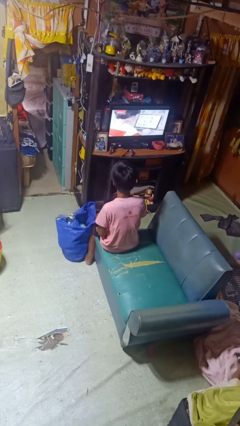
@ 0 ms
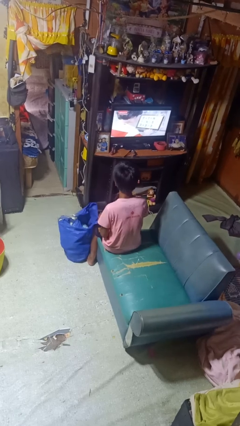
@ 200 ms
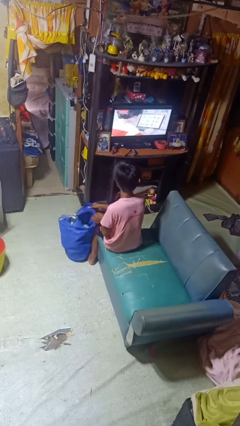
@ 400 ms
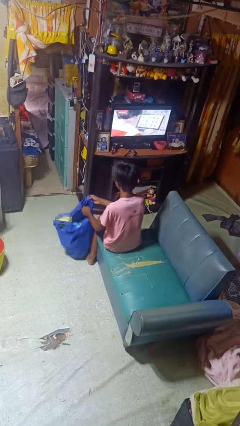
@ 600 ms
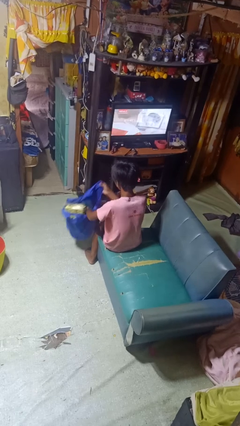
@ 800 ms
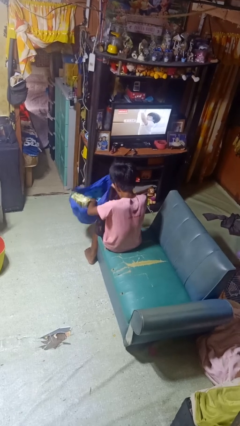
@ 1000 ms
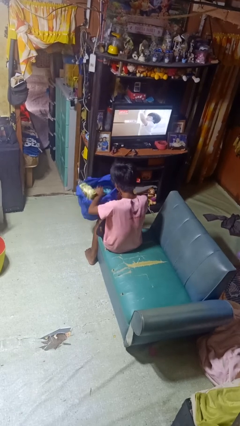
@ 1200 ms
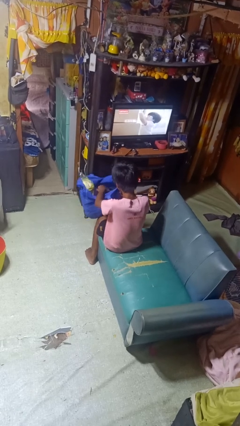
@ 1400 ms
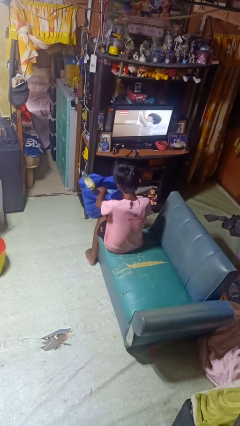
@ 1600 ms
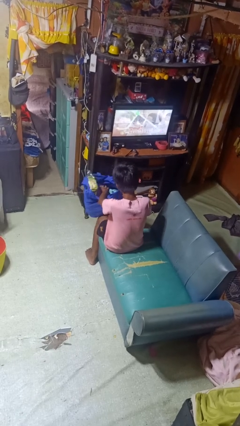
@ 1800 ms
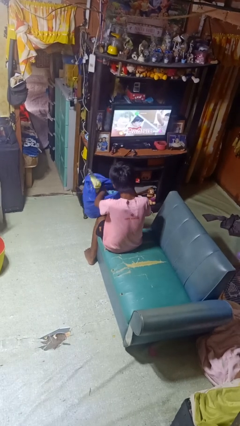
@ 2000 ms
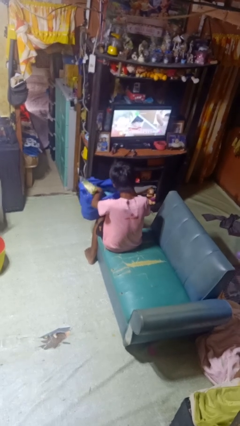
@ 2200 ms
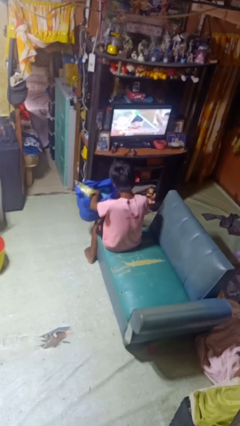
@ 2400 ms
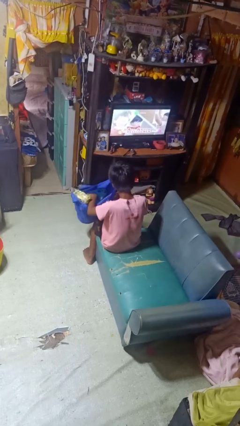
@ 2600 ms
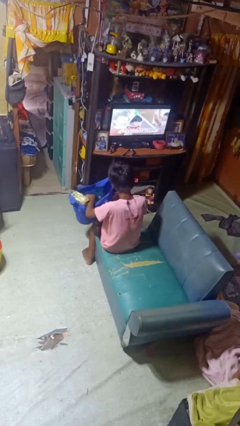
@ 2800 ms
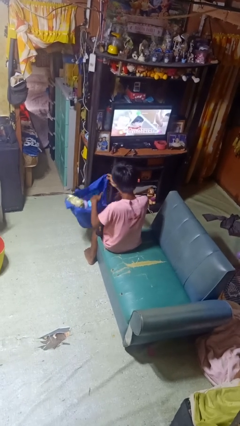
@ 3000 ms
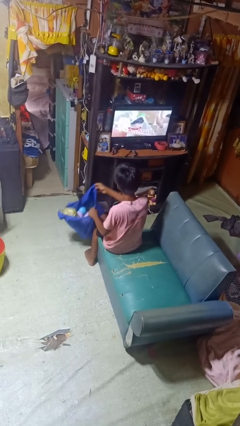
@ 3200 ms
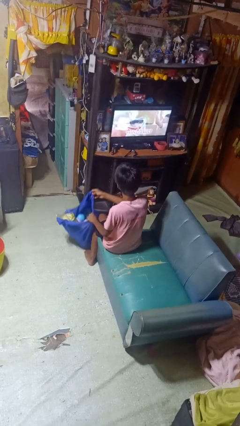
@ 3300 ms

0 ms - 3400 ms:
person searches in bag

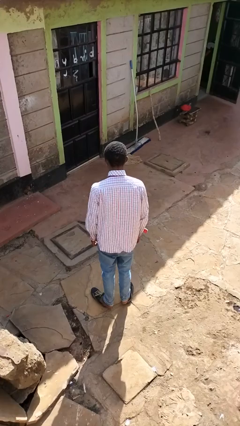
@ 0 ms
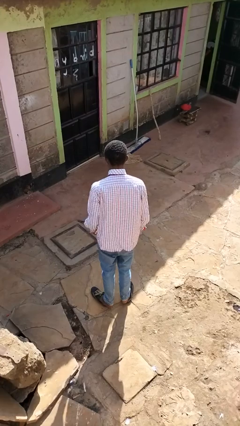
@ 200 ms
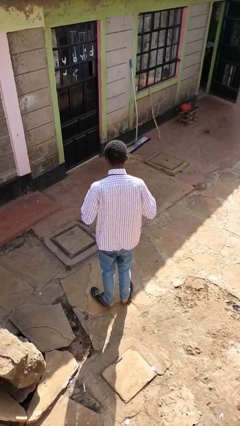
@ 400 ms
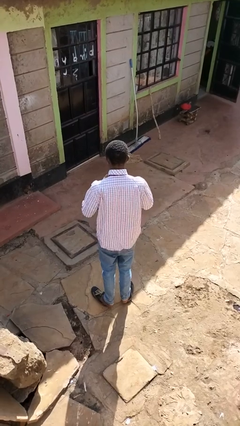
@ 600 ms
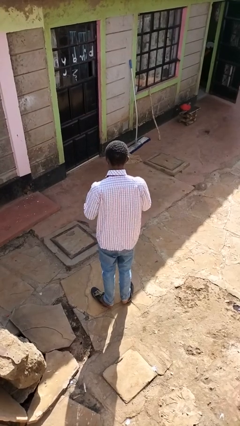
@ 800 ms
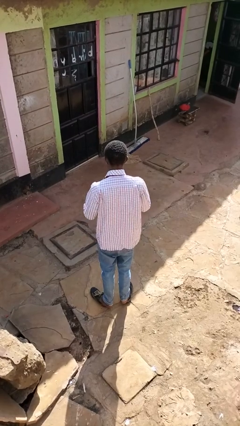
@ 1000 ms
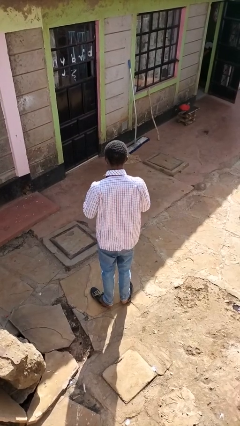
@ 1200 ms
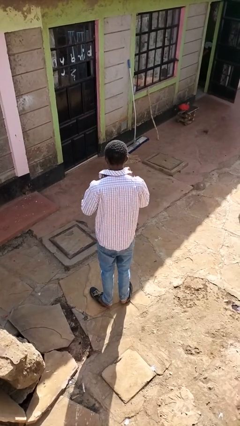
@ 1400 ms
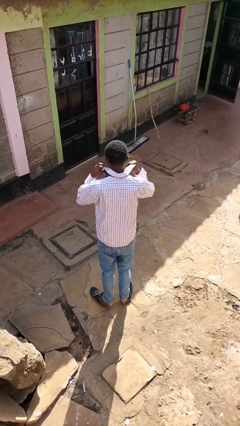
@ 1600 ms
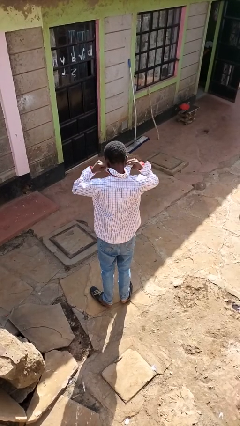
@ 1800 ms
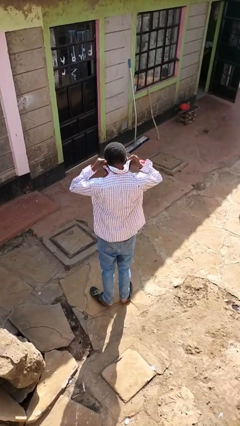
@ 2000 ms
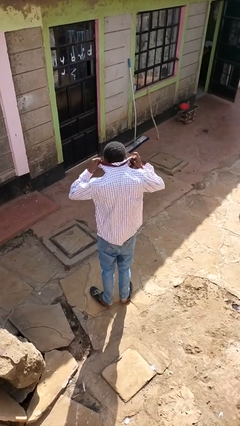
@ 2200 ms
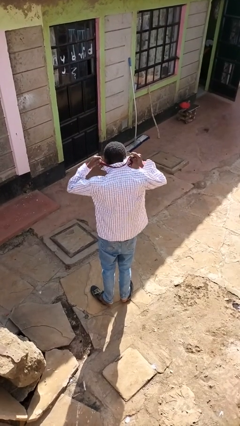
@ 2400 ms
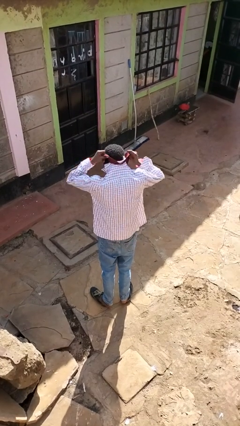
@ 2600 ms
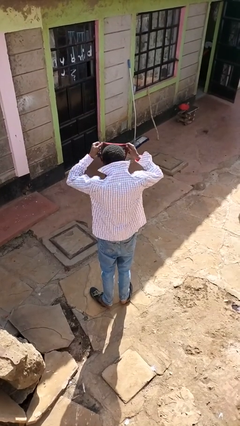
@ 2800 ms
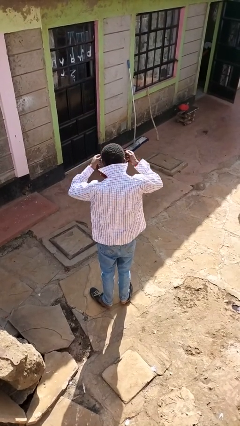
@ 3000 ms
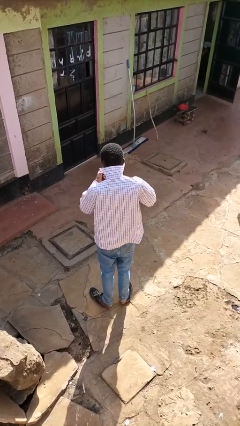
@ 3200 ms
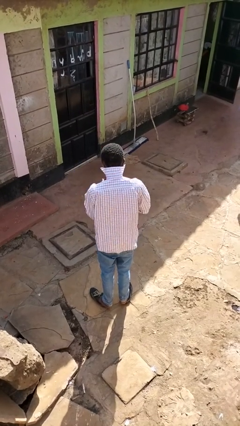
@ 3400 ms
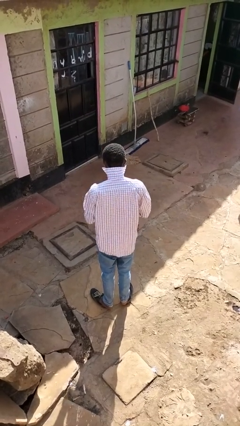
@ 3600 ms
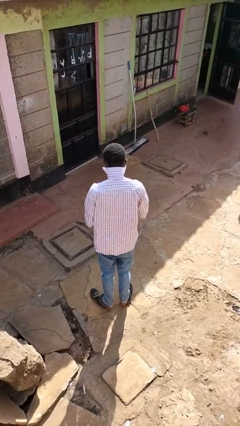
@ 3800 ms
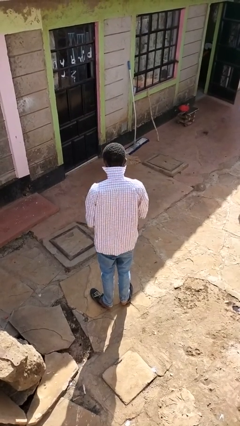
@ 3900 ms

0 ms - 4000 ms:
person takes off necktie

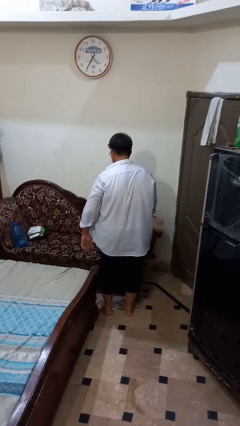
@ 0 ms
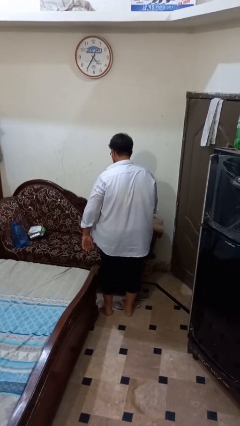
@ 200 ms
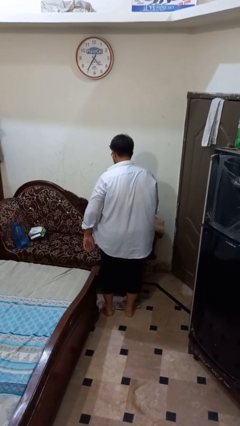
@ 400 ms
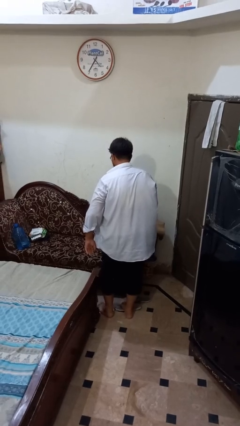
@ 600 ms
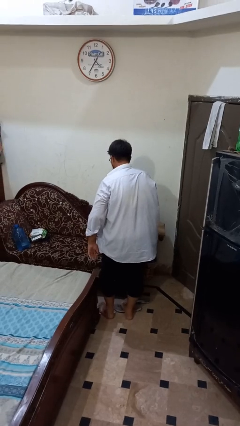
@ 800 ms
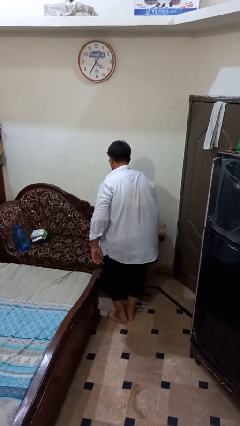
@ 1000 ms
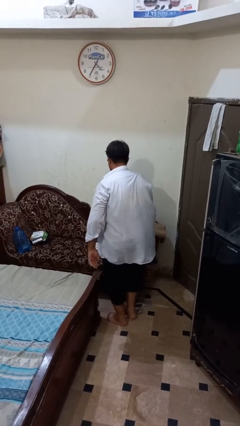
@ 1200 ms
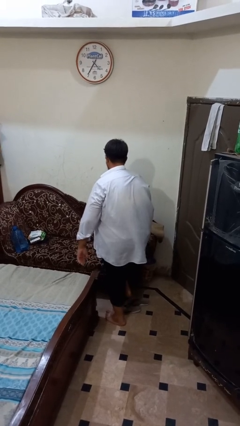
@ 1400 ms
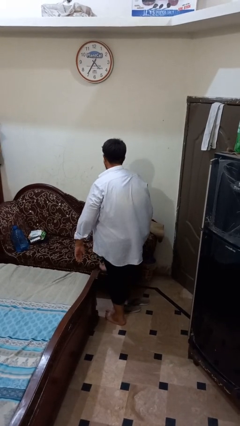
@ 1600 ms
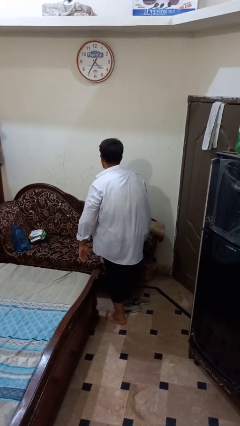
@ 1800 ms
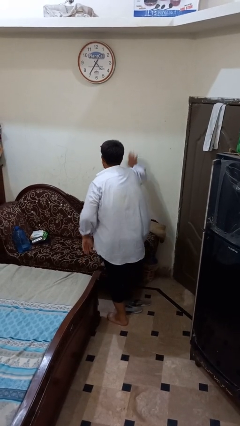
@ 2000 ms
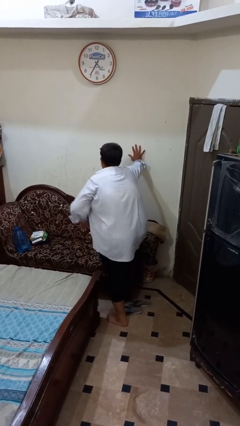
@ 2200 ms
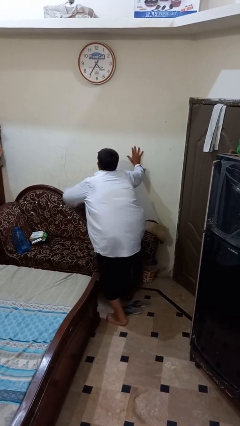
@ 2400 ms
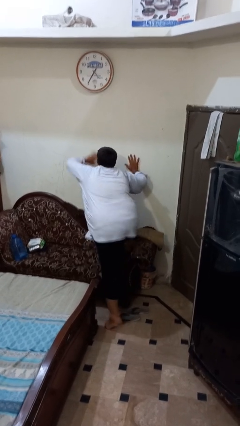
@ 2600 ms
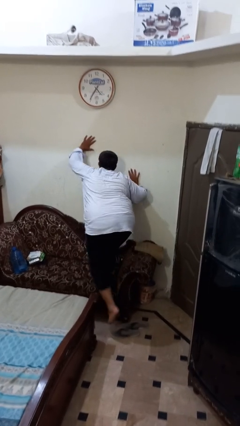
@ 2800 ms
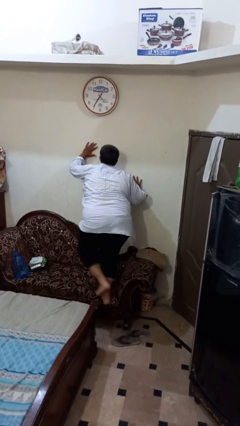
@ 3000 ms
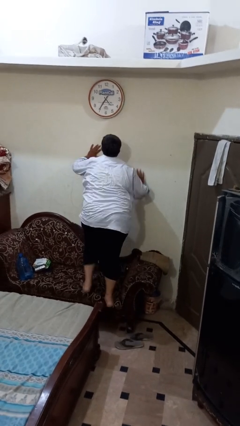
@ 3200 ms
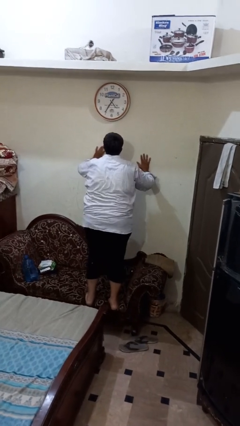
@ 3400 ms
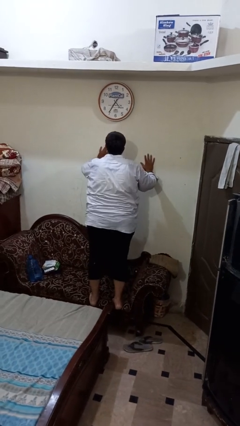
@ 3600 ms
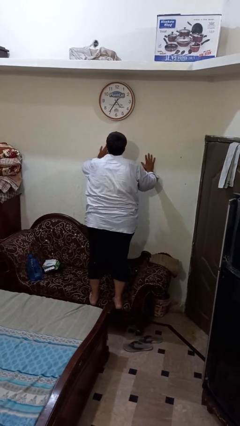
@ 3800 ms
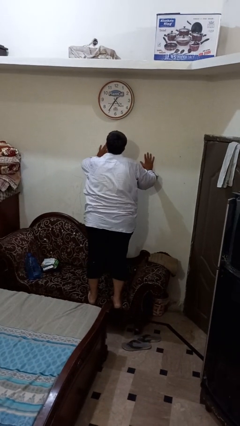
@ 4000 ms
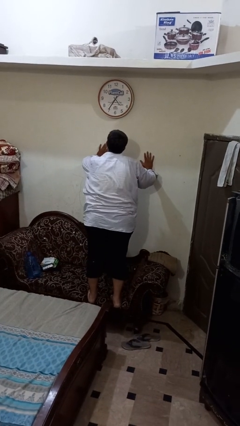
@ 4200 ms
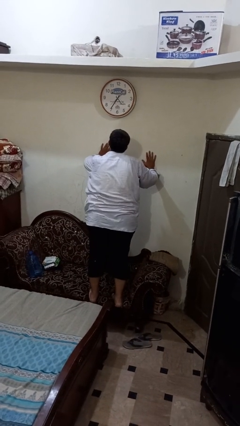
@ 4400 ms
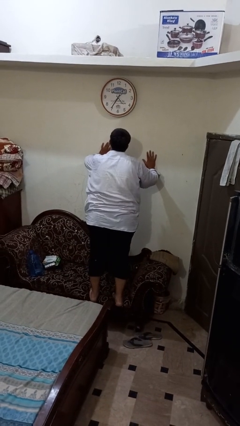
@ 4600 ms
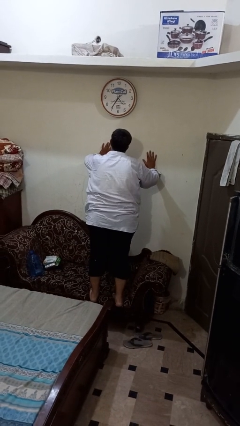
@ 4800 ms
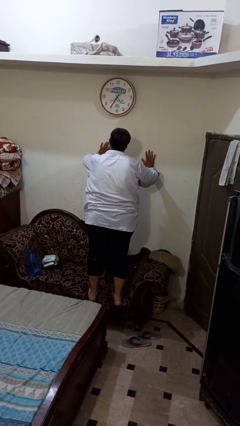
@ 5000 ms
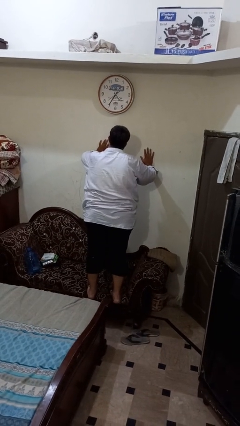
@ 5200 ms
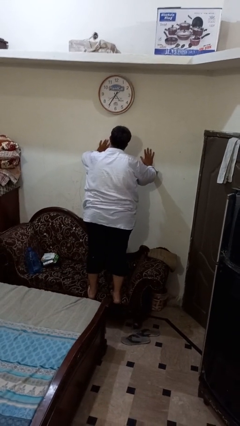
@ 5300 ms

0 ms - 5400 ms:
person climbs on couch

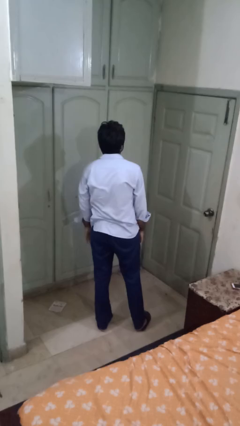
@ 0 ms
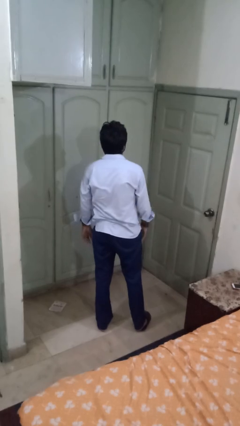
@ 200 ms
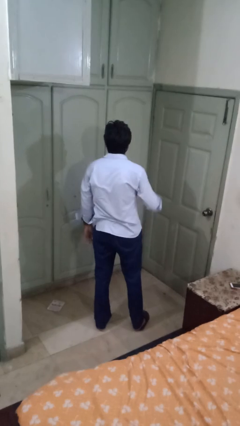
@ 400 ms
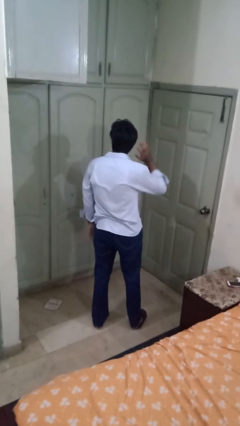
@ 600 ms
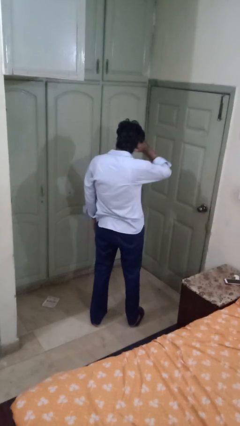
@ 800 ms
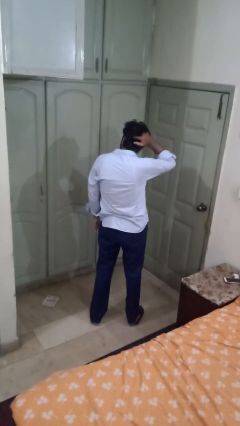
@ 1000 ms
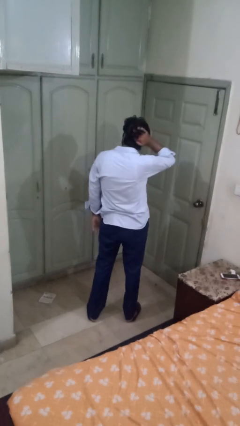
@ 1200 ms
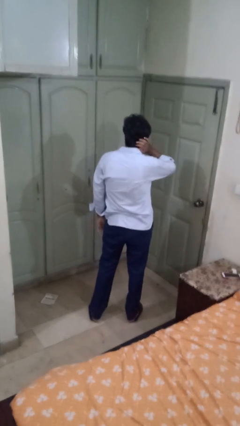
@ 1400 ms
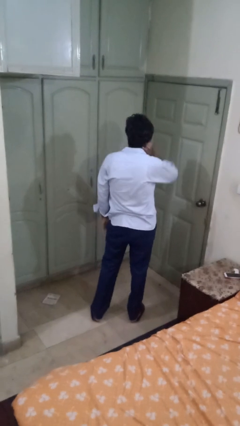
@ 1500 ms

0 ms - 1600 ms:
person strokes hair

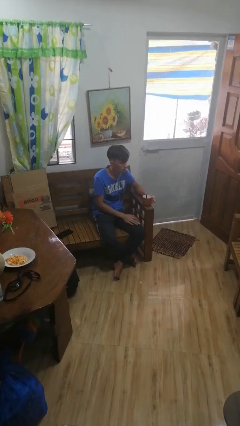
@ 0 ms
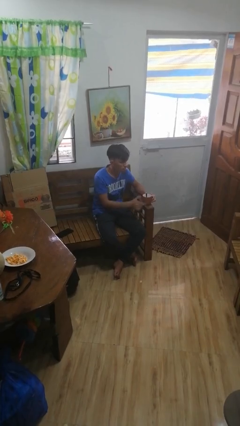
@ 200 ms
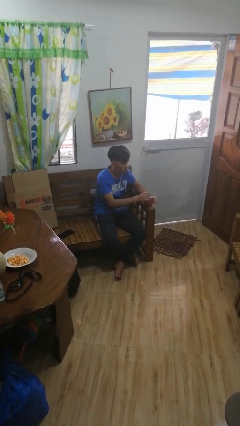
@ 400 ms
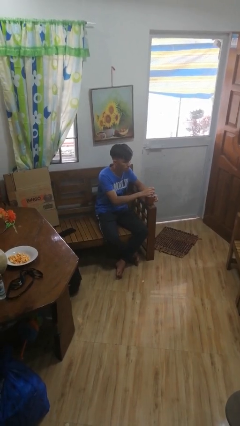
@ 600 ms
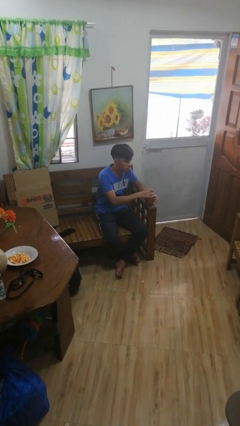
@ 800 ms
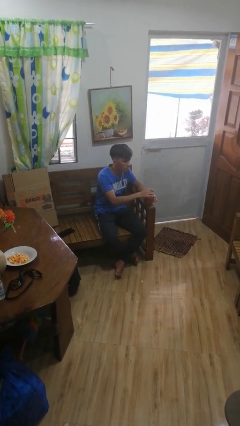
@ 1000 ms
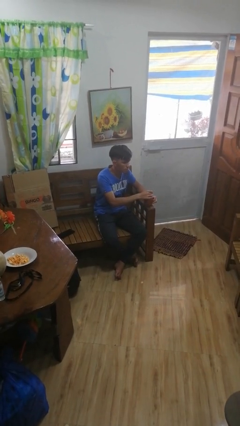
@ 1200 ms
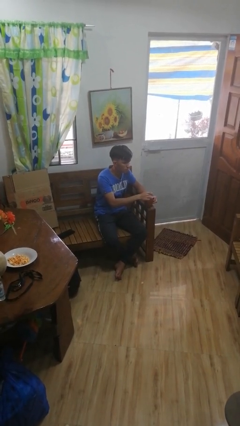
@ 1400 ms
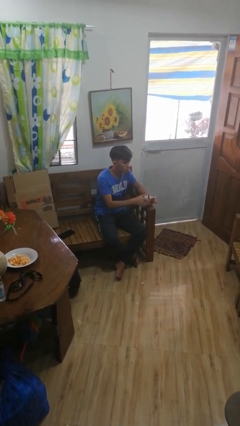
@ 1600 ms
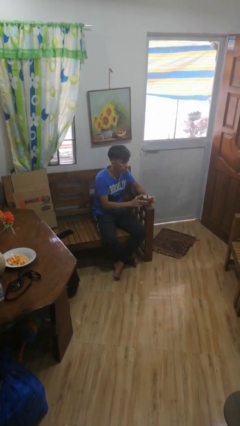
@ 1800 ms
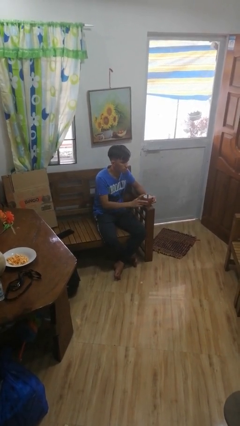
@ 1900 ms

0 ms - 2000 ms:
person stirs mug

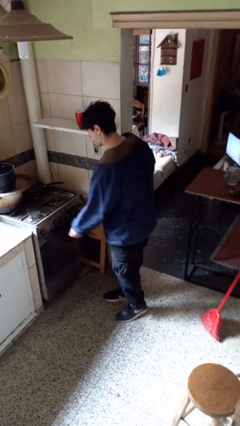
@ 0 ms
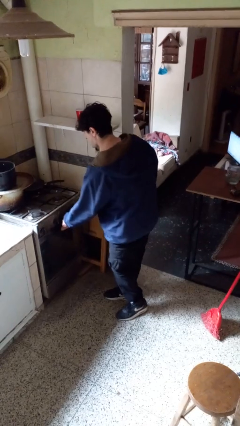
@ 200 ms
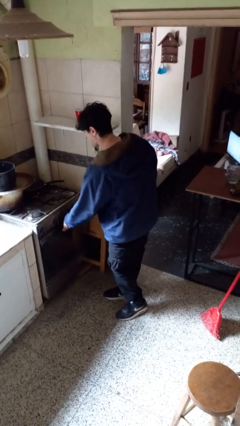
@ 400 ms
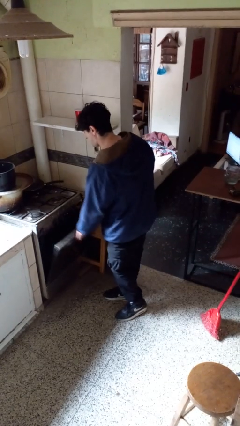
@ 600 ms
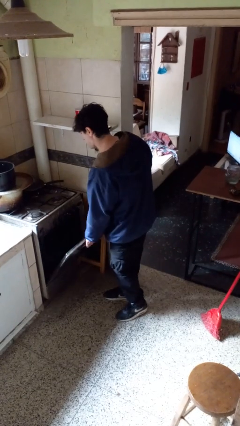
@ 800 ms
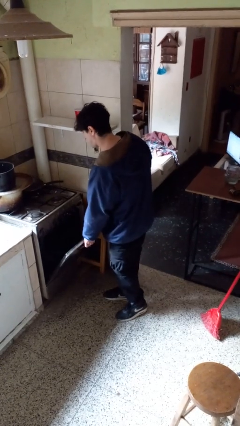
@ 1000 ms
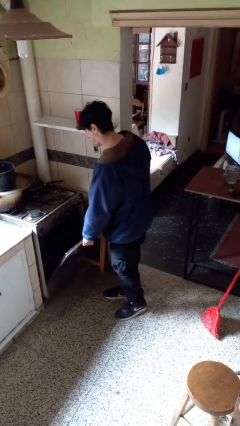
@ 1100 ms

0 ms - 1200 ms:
person opens oven door
